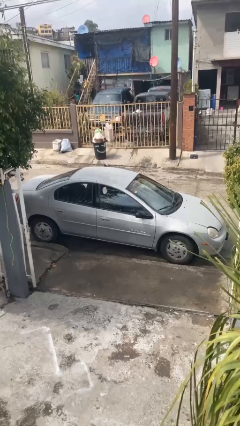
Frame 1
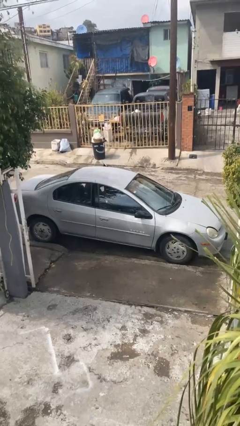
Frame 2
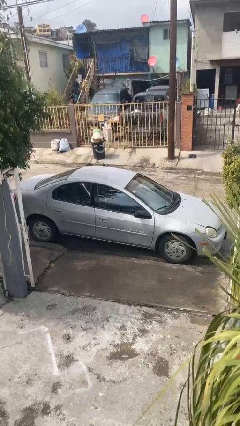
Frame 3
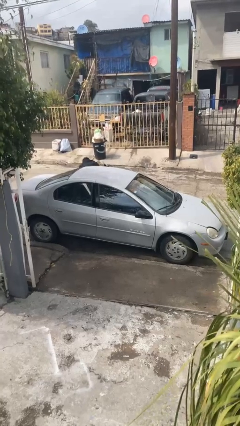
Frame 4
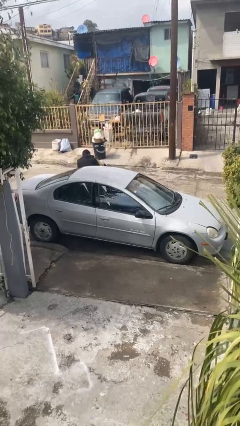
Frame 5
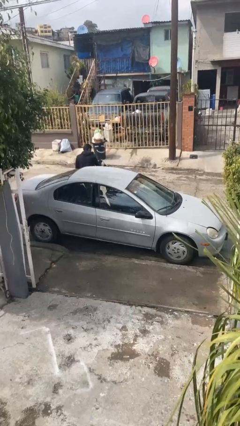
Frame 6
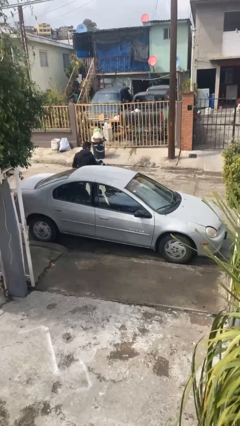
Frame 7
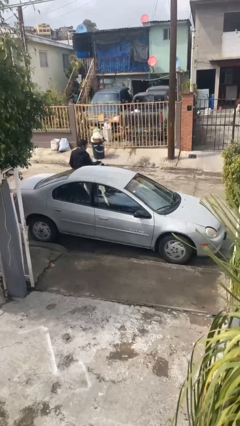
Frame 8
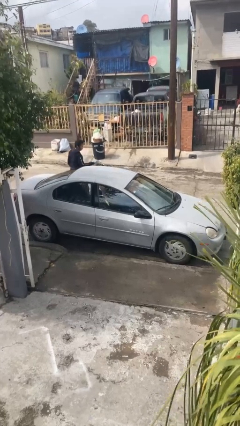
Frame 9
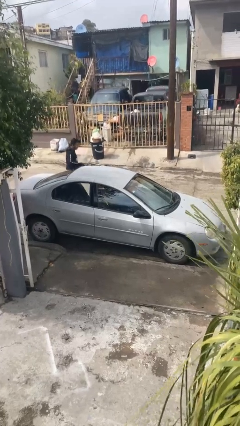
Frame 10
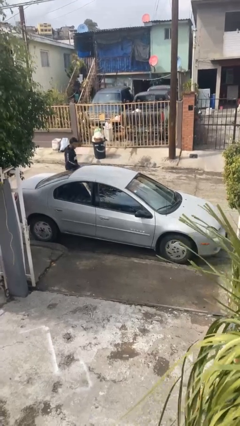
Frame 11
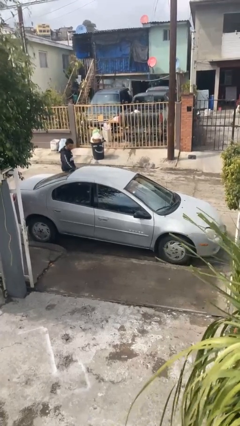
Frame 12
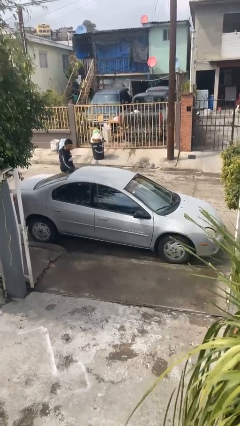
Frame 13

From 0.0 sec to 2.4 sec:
car drops off person

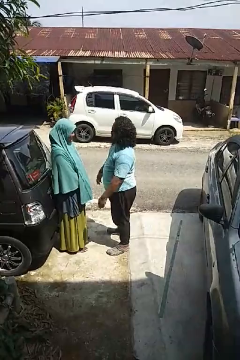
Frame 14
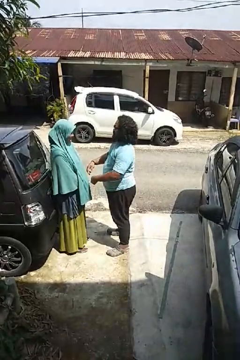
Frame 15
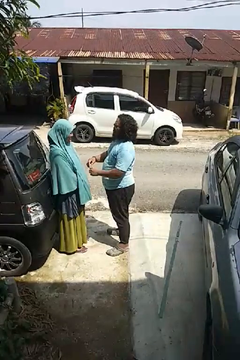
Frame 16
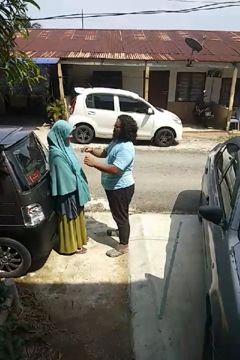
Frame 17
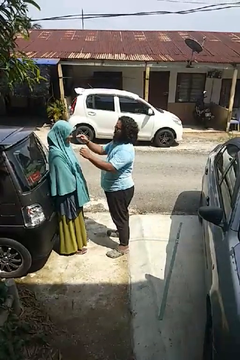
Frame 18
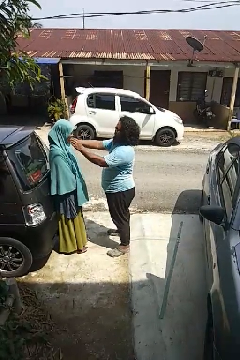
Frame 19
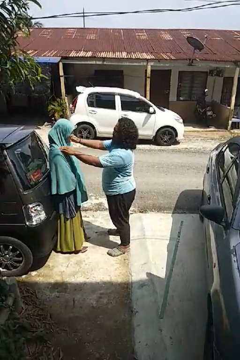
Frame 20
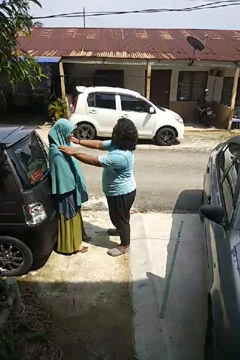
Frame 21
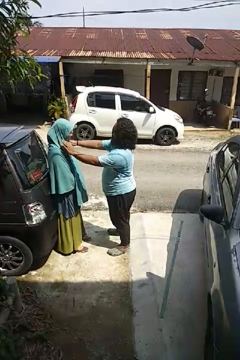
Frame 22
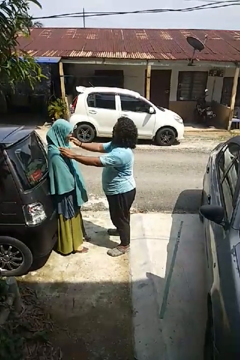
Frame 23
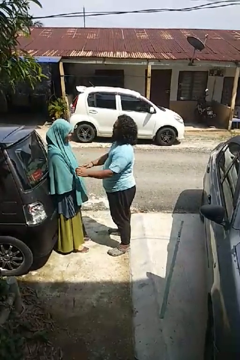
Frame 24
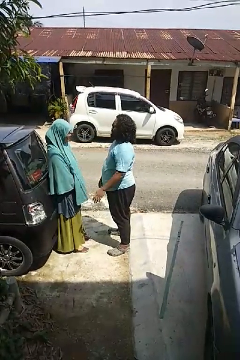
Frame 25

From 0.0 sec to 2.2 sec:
person pounds shoulders of person

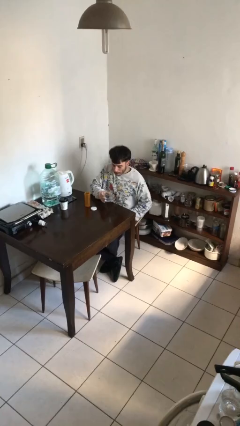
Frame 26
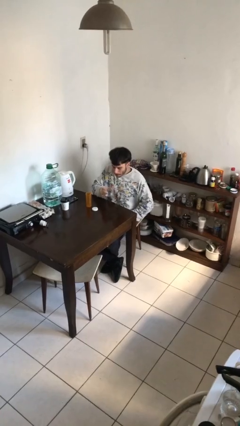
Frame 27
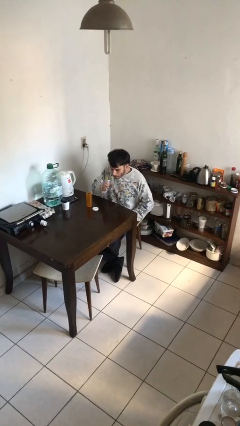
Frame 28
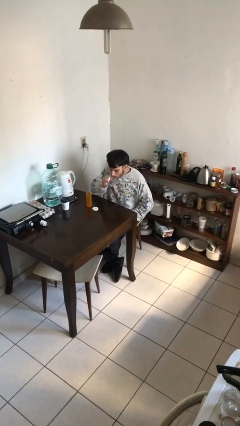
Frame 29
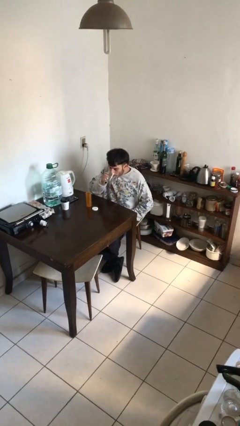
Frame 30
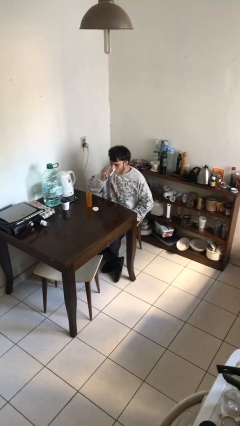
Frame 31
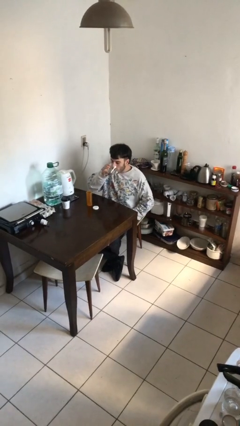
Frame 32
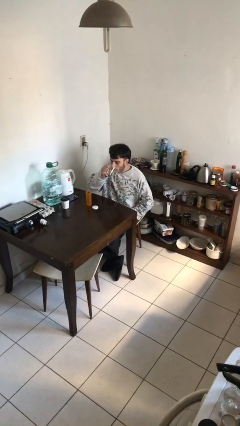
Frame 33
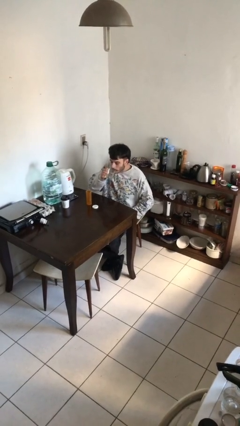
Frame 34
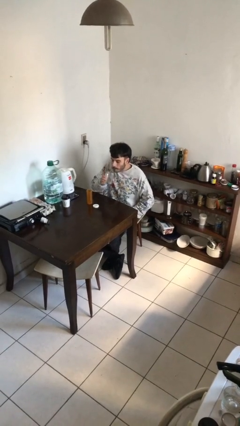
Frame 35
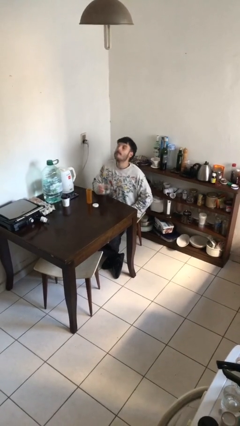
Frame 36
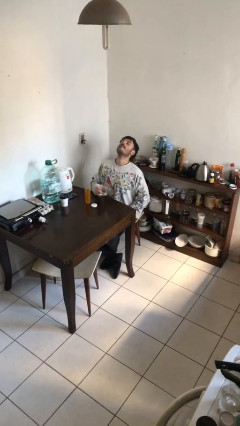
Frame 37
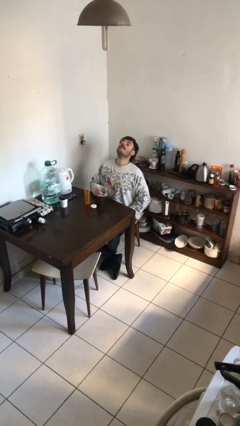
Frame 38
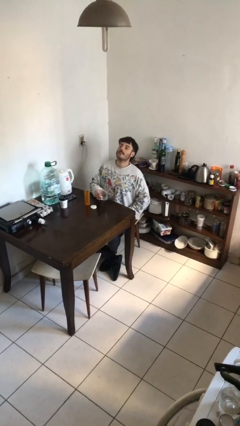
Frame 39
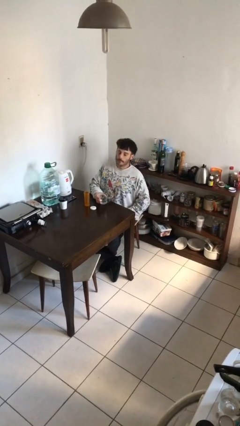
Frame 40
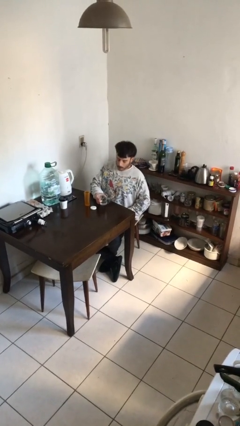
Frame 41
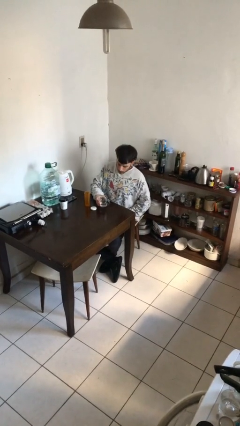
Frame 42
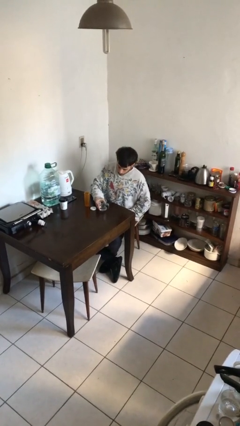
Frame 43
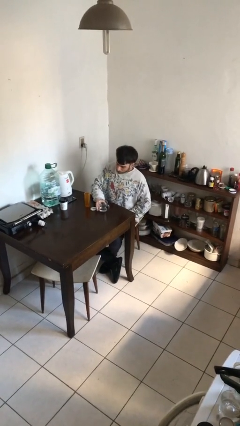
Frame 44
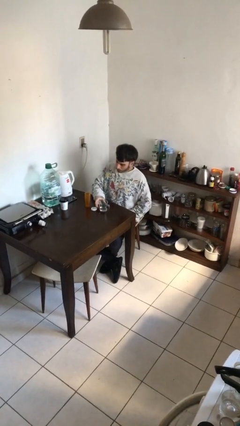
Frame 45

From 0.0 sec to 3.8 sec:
person drinks from cup

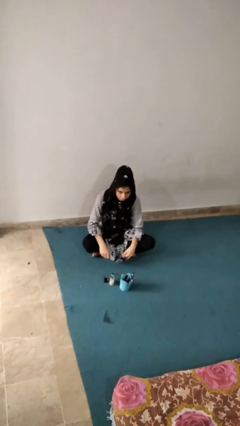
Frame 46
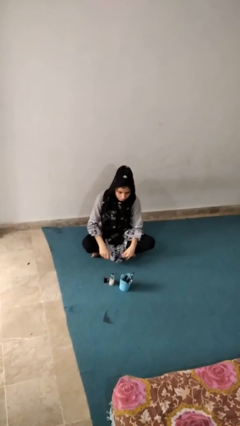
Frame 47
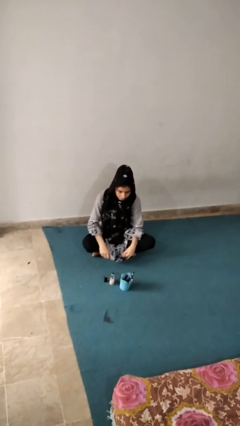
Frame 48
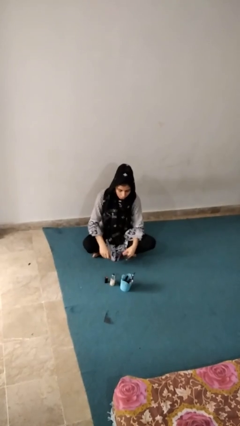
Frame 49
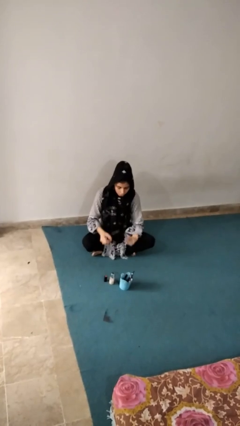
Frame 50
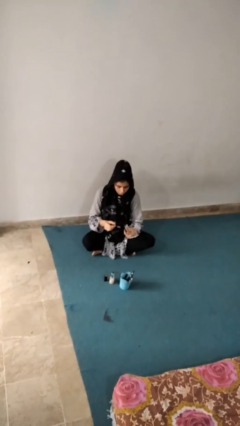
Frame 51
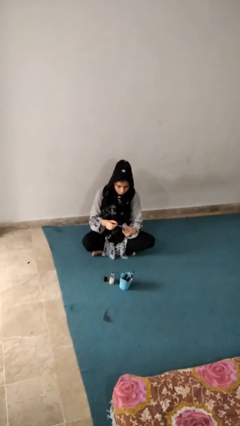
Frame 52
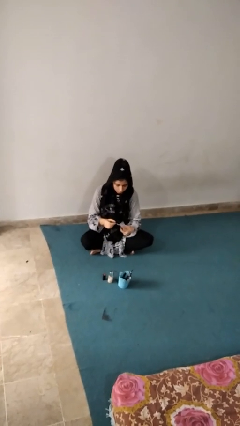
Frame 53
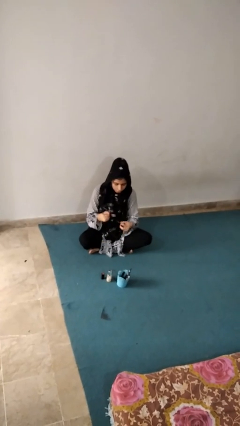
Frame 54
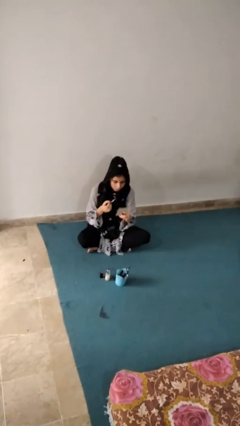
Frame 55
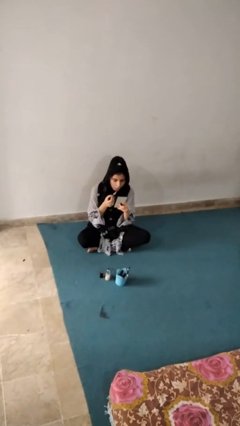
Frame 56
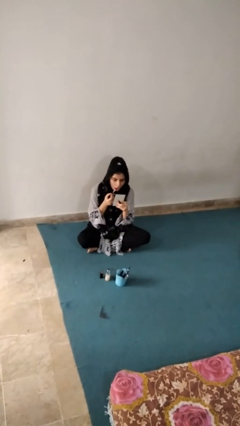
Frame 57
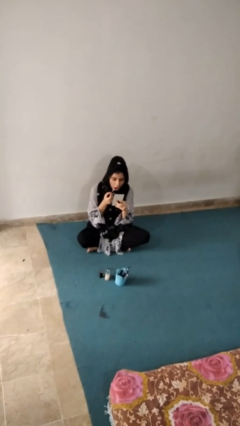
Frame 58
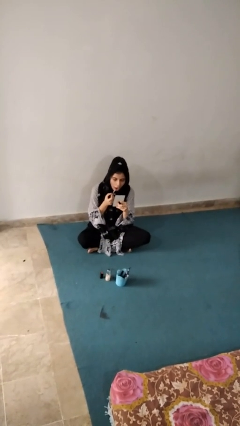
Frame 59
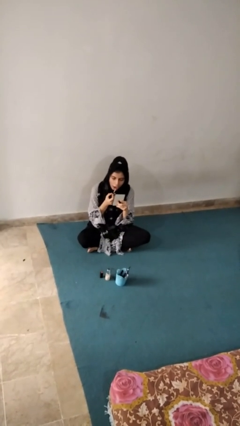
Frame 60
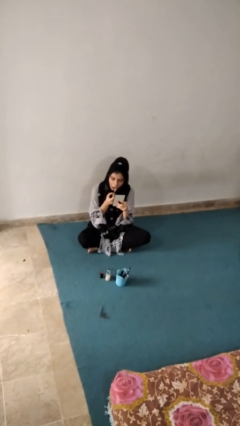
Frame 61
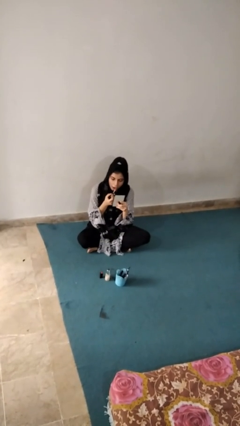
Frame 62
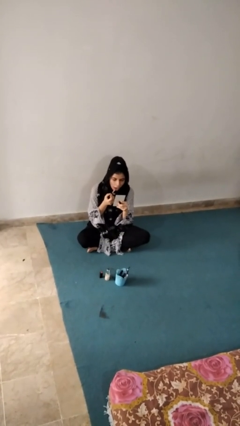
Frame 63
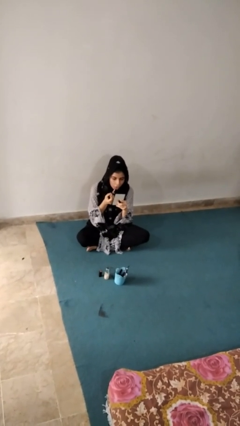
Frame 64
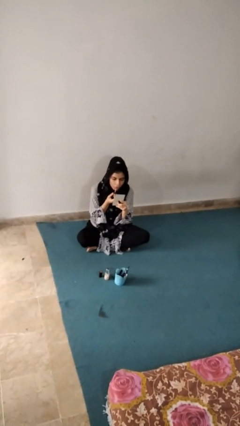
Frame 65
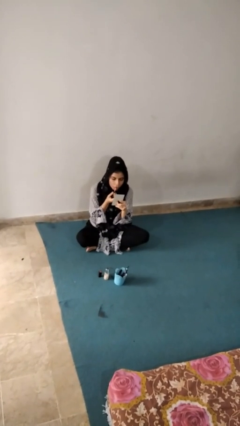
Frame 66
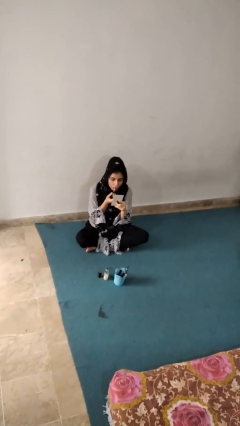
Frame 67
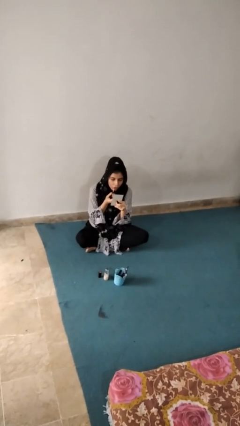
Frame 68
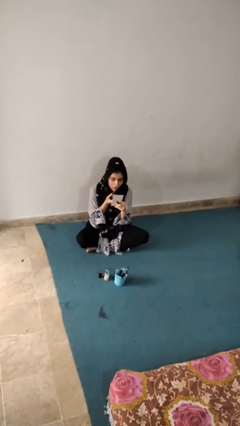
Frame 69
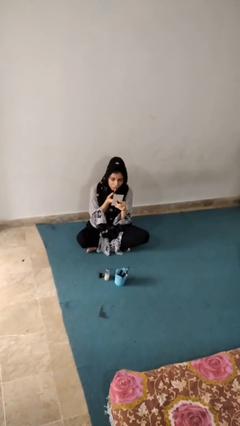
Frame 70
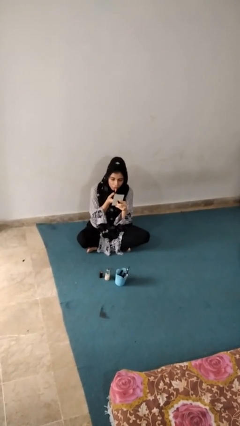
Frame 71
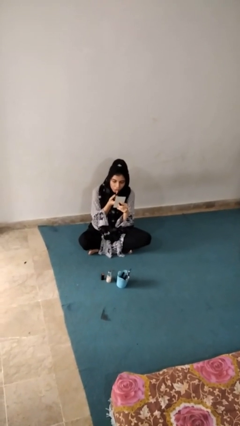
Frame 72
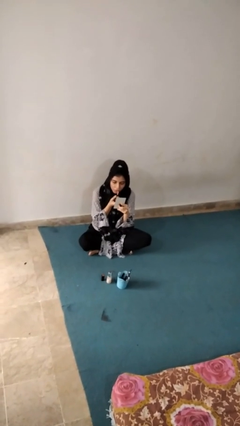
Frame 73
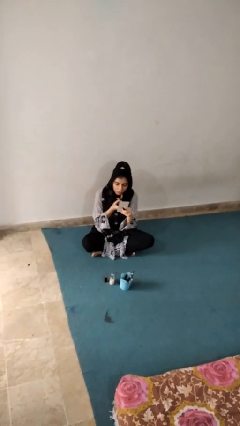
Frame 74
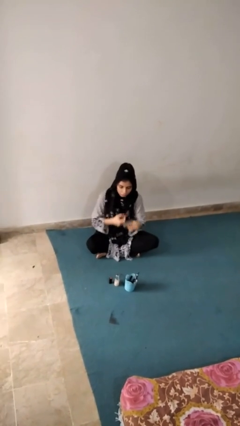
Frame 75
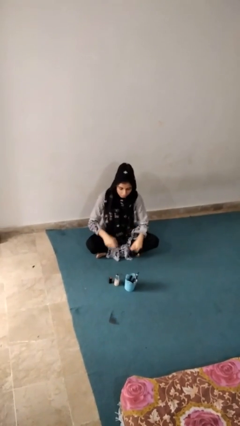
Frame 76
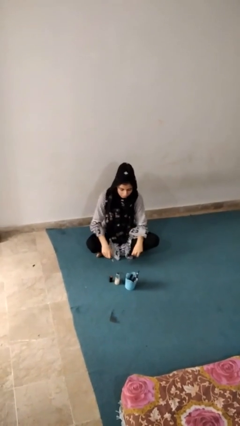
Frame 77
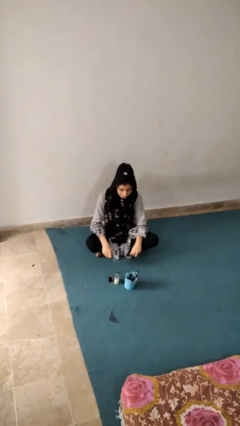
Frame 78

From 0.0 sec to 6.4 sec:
person applies lip makeup

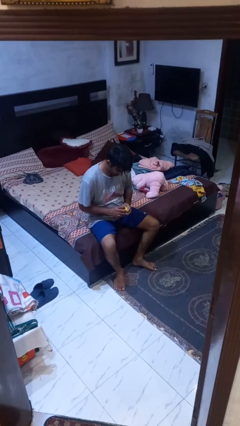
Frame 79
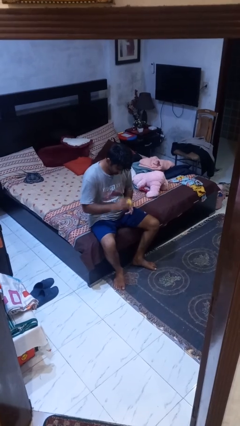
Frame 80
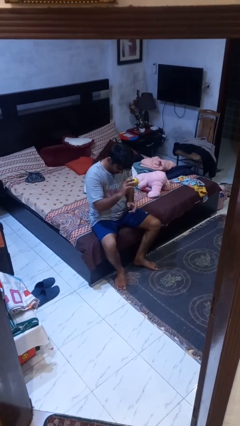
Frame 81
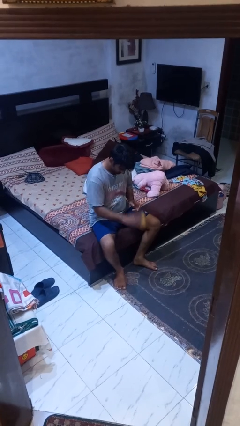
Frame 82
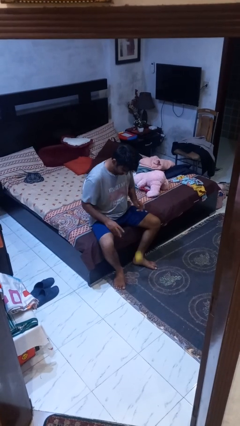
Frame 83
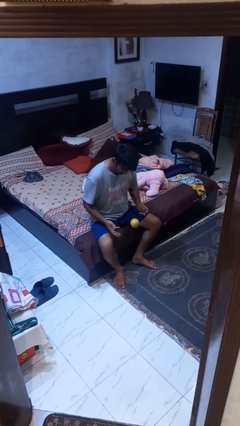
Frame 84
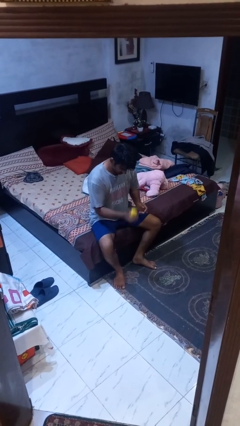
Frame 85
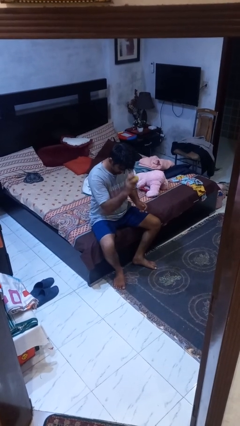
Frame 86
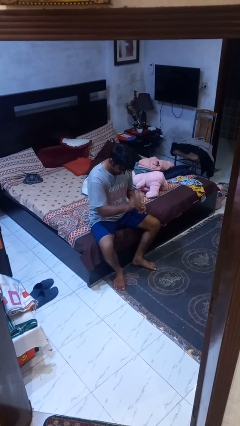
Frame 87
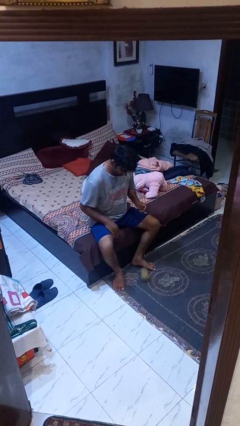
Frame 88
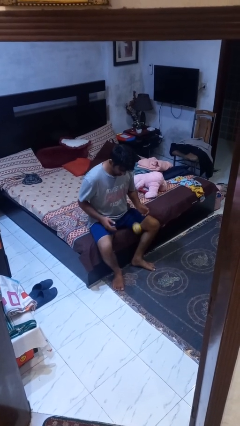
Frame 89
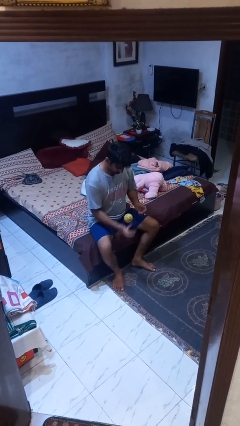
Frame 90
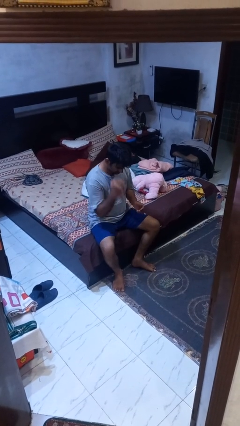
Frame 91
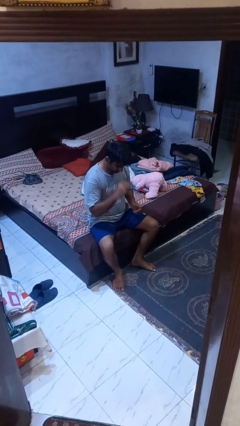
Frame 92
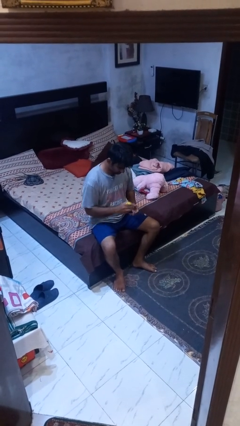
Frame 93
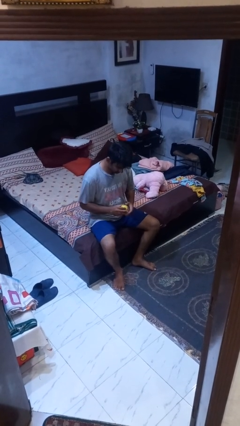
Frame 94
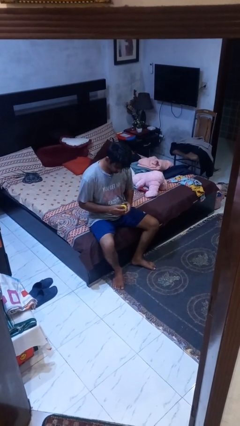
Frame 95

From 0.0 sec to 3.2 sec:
person bounces ball on floor
